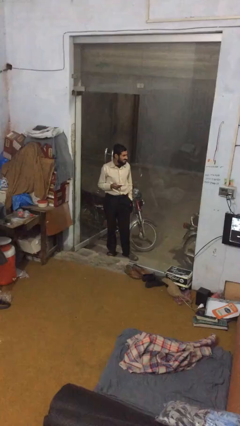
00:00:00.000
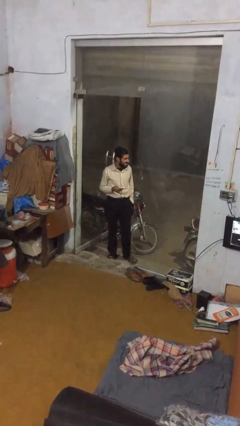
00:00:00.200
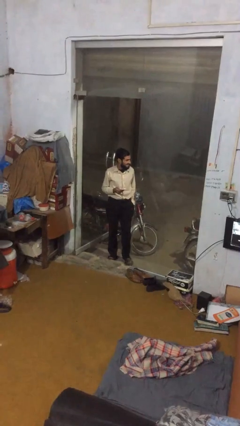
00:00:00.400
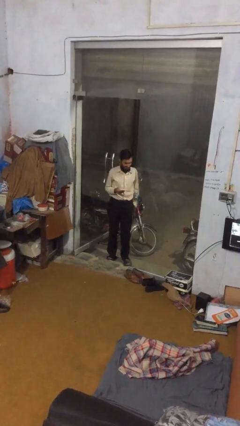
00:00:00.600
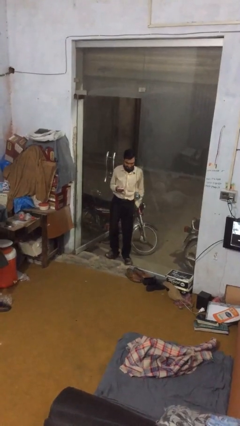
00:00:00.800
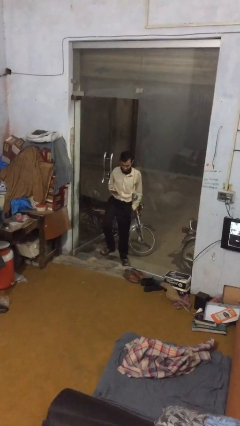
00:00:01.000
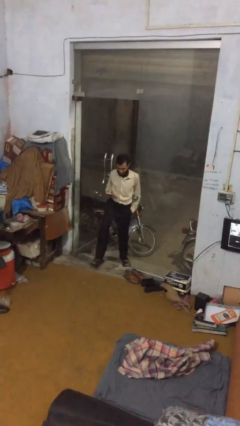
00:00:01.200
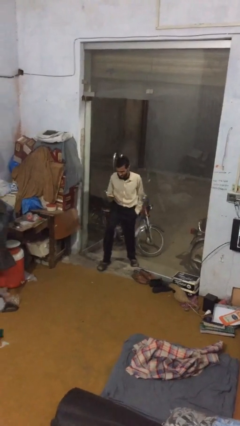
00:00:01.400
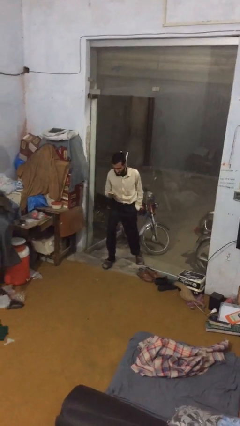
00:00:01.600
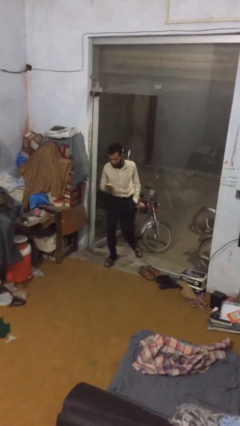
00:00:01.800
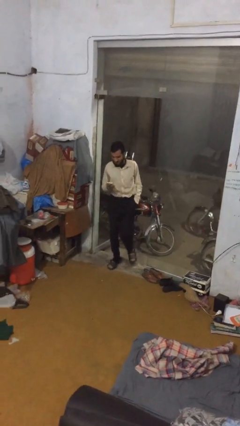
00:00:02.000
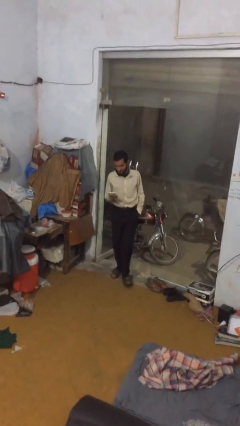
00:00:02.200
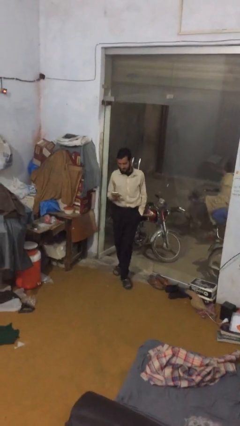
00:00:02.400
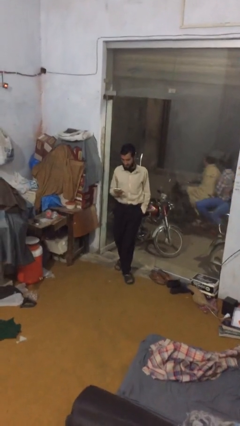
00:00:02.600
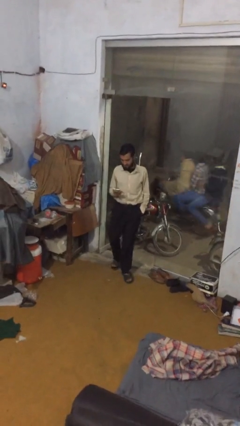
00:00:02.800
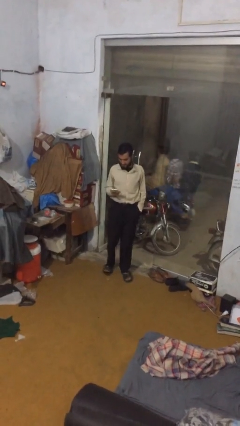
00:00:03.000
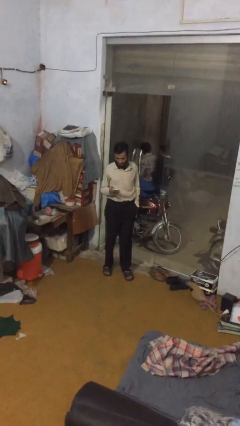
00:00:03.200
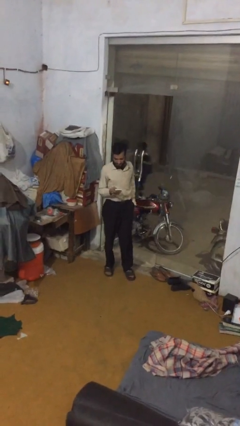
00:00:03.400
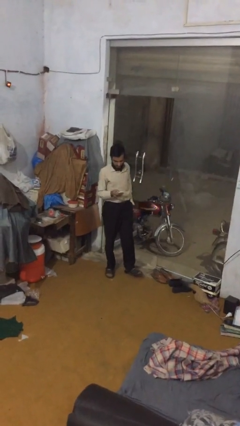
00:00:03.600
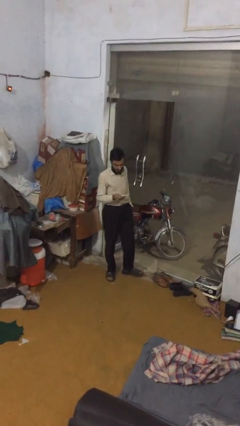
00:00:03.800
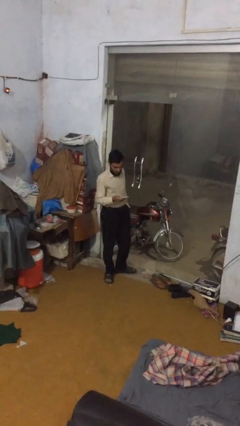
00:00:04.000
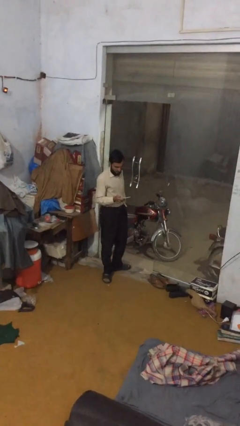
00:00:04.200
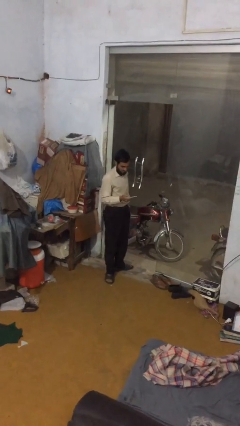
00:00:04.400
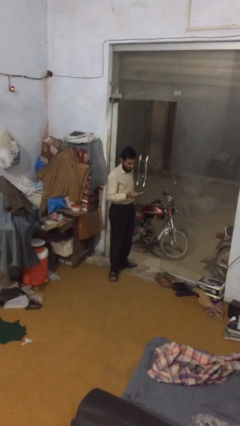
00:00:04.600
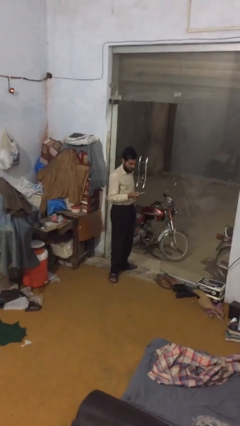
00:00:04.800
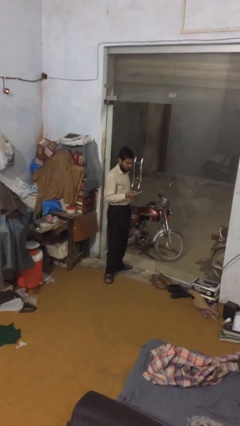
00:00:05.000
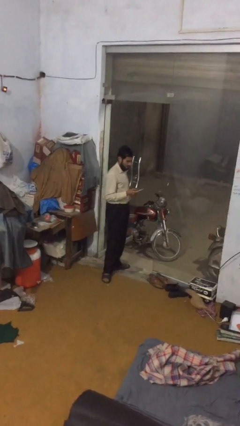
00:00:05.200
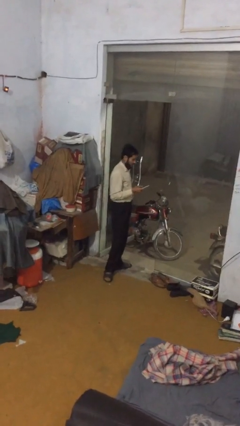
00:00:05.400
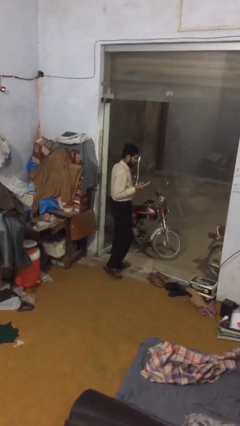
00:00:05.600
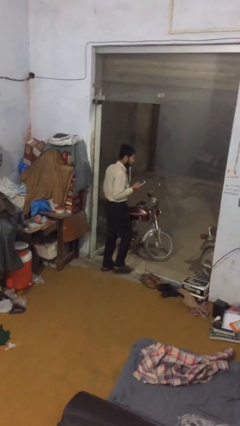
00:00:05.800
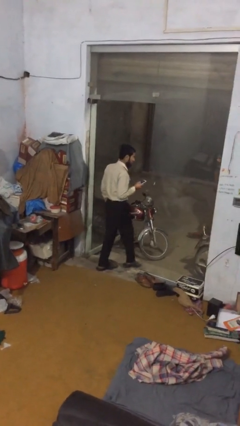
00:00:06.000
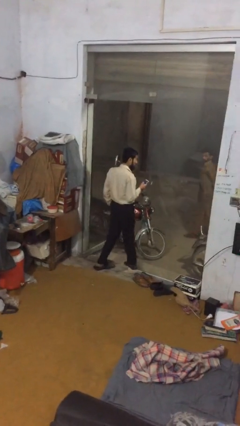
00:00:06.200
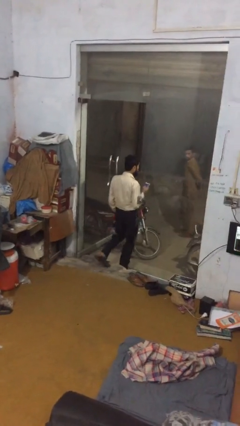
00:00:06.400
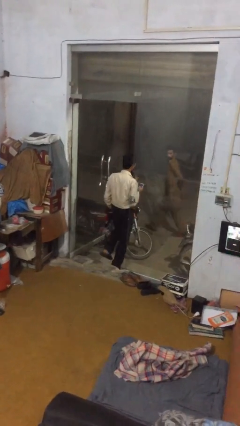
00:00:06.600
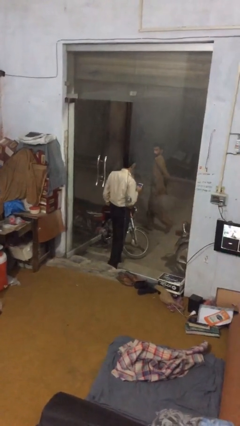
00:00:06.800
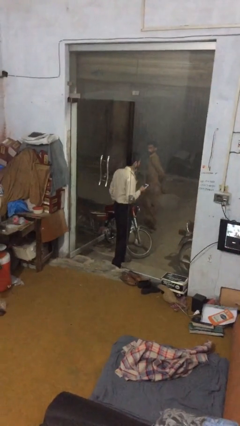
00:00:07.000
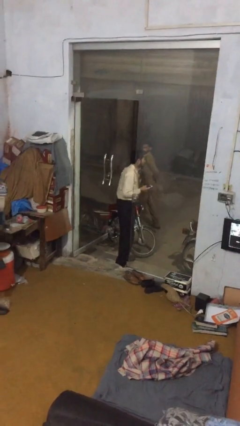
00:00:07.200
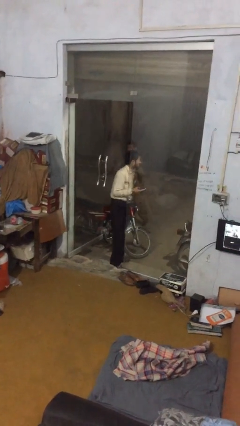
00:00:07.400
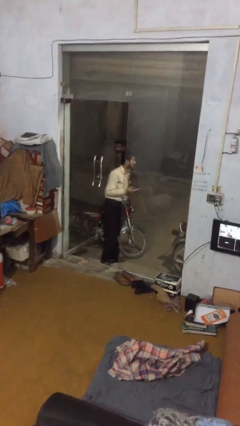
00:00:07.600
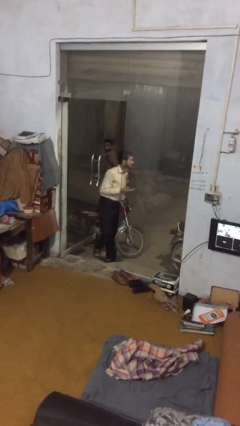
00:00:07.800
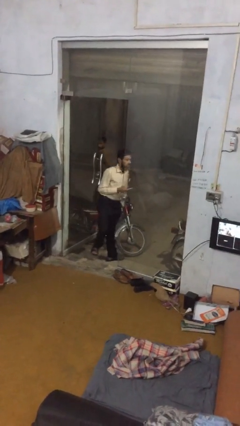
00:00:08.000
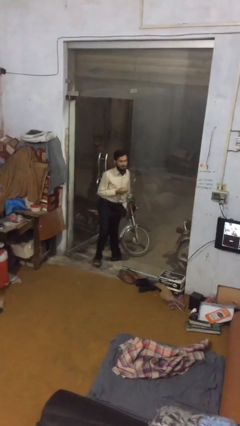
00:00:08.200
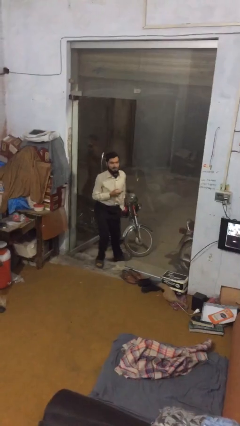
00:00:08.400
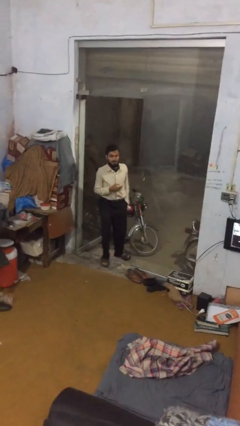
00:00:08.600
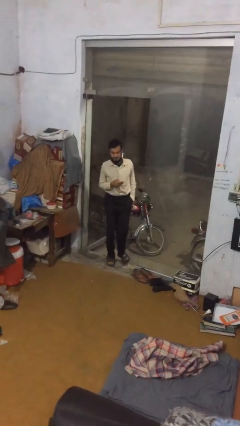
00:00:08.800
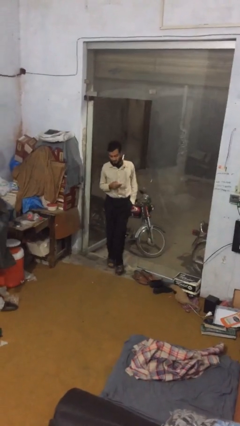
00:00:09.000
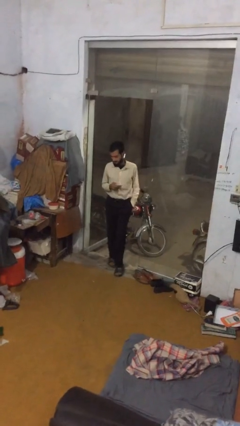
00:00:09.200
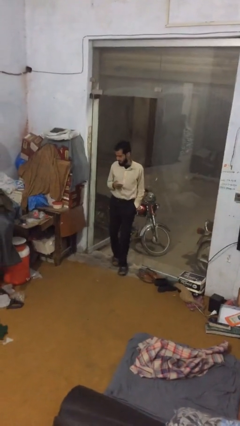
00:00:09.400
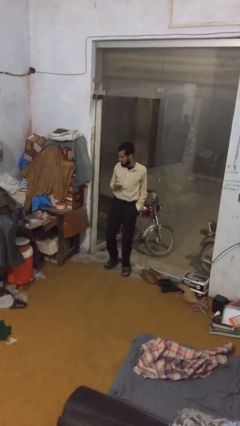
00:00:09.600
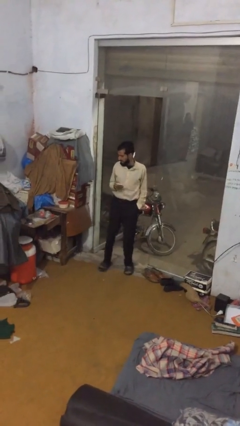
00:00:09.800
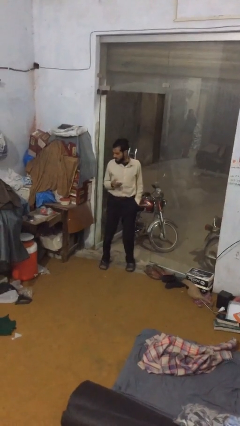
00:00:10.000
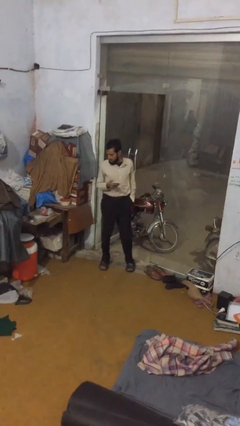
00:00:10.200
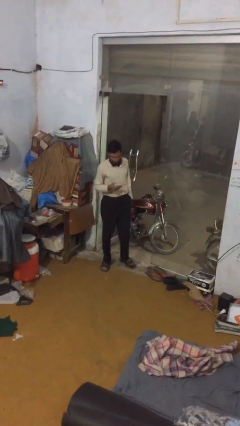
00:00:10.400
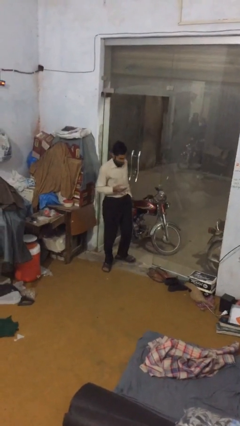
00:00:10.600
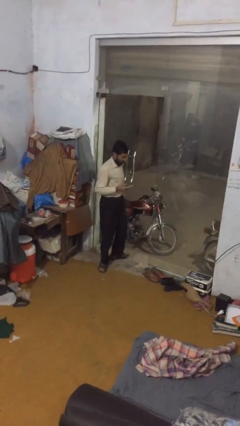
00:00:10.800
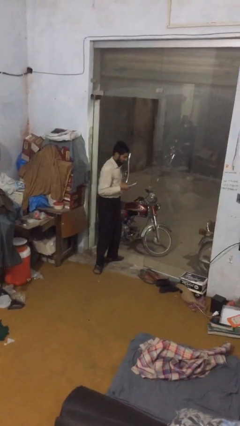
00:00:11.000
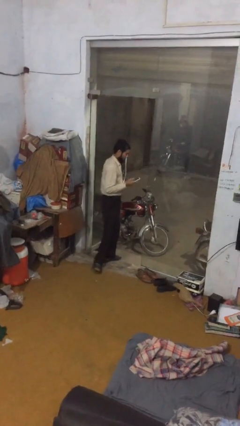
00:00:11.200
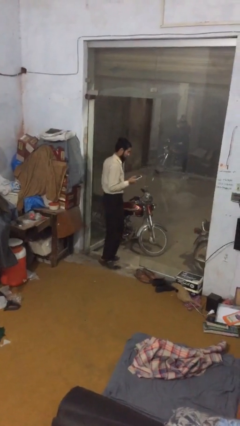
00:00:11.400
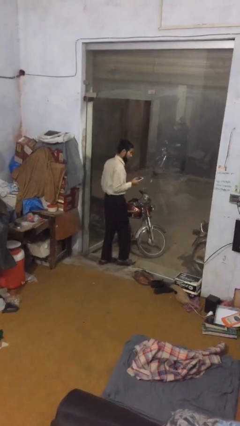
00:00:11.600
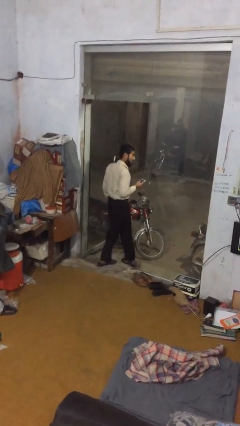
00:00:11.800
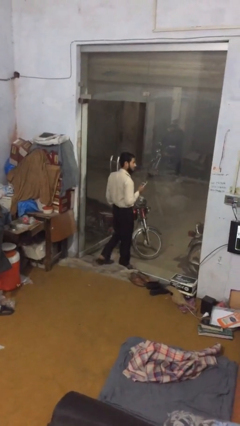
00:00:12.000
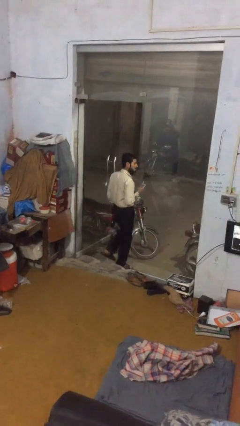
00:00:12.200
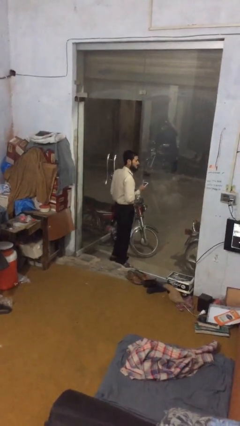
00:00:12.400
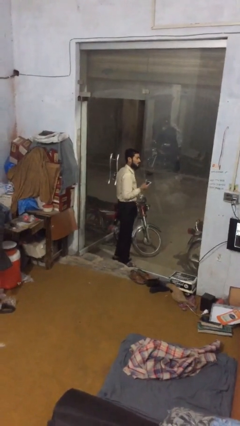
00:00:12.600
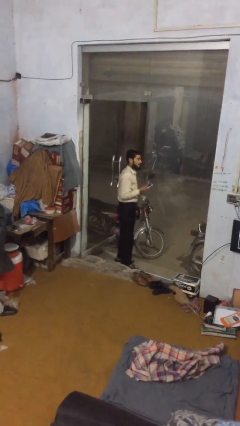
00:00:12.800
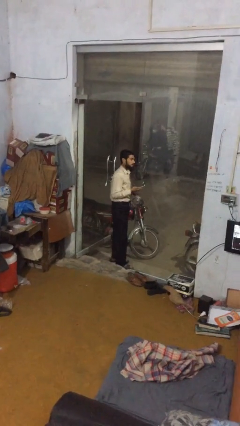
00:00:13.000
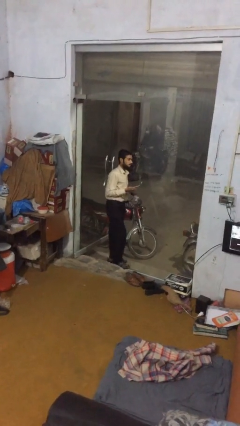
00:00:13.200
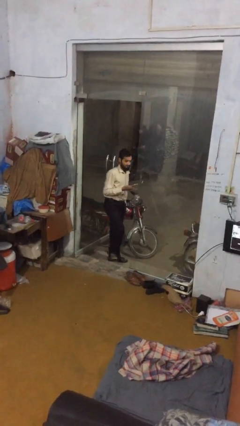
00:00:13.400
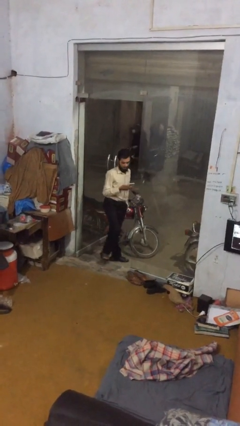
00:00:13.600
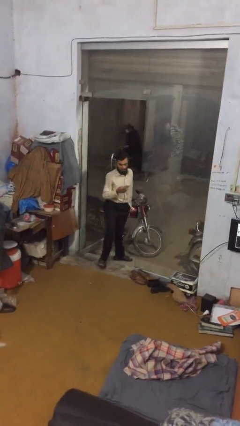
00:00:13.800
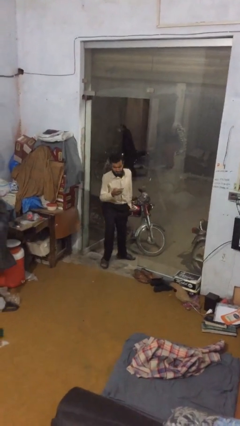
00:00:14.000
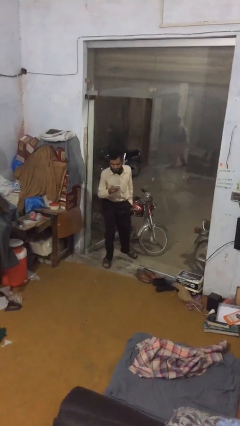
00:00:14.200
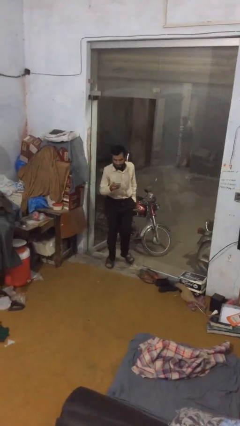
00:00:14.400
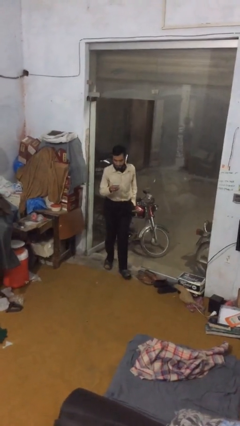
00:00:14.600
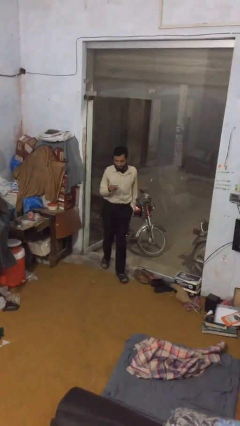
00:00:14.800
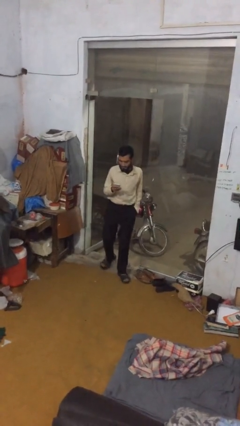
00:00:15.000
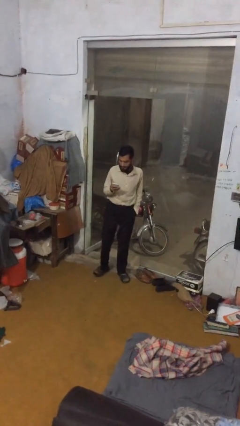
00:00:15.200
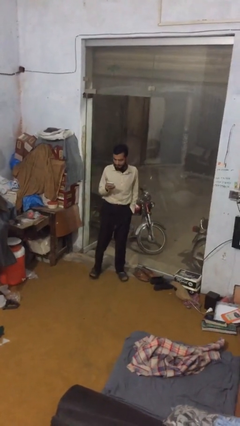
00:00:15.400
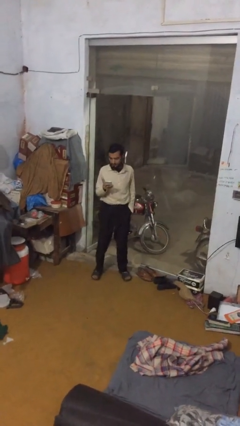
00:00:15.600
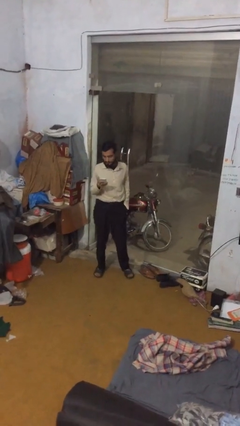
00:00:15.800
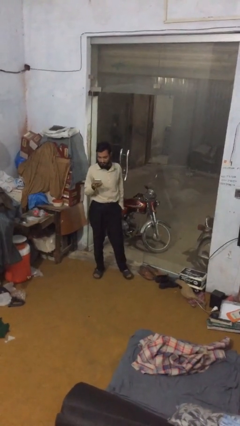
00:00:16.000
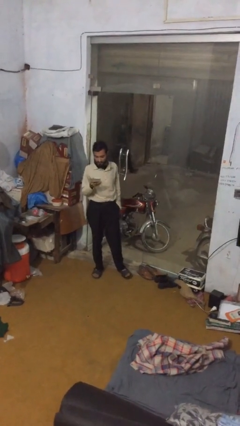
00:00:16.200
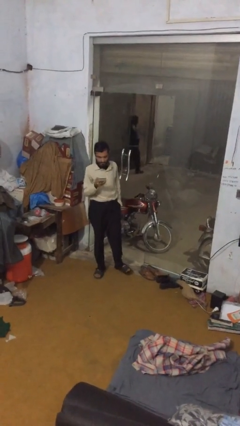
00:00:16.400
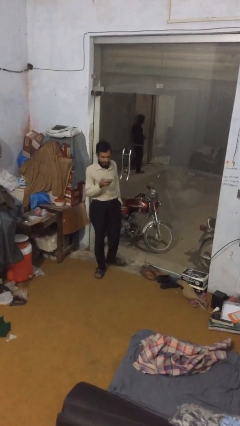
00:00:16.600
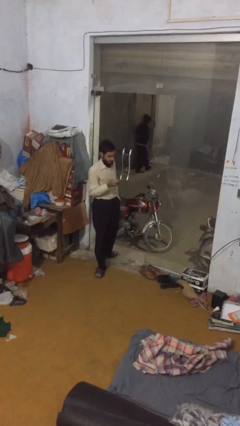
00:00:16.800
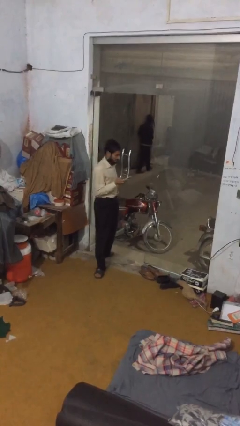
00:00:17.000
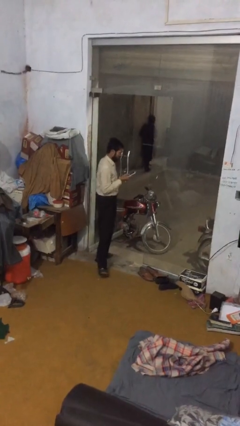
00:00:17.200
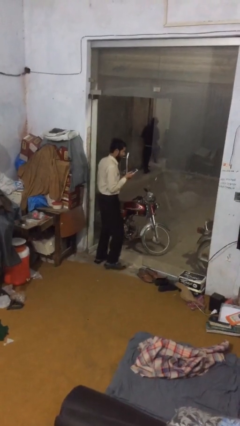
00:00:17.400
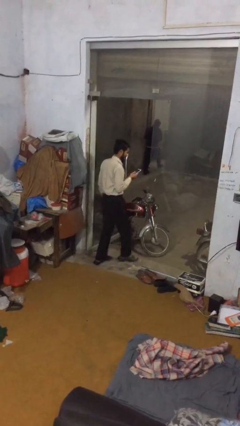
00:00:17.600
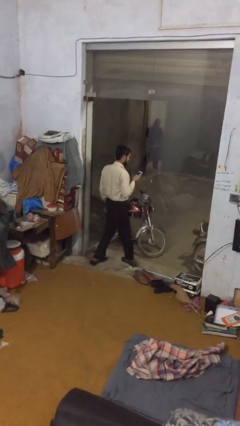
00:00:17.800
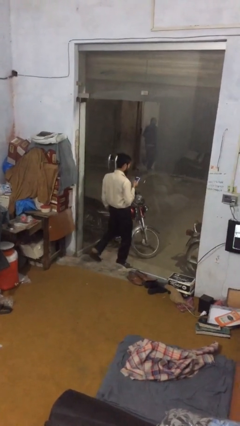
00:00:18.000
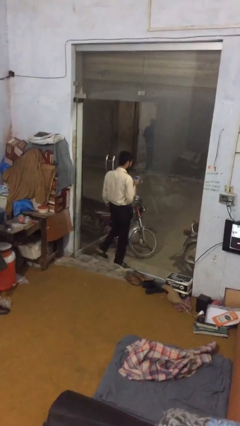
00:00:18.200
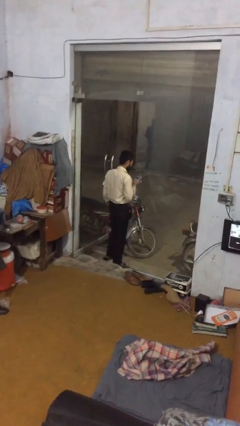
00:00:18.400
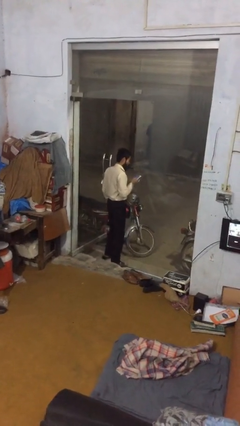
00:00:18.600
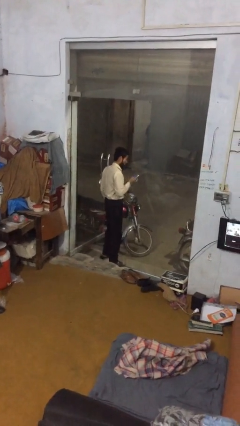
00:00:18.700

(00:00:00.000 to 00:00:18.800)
person texts on phone
